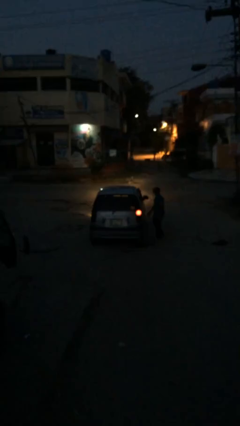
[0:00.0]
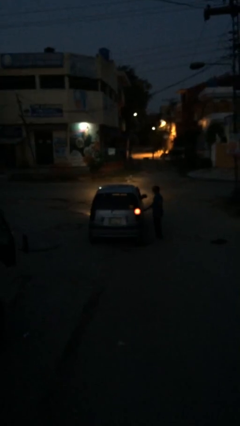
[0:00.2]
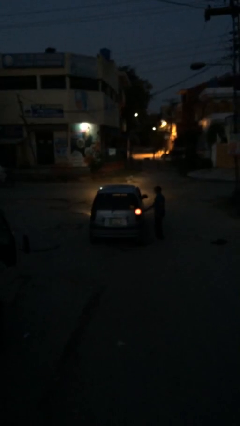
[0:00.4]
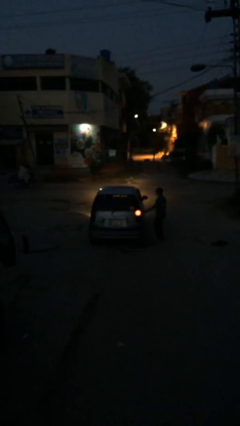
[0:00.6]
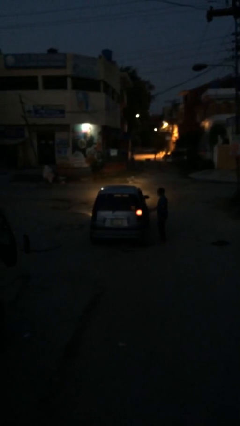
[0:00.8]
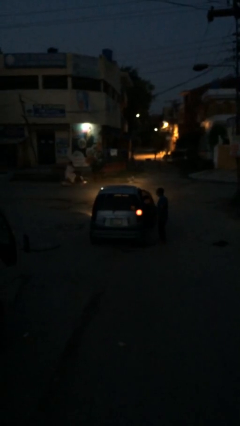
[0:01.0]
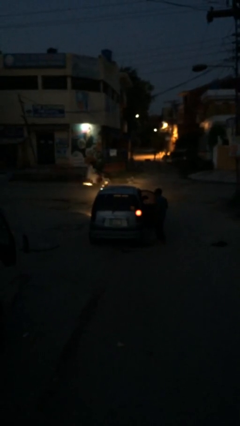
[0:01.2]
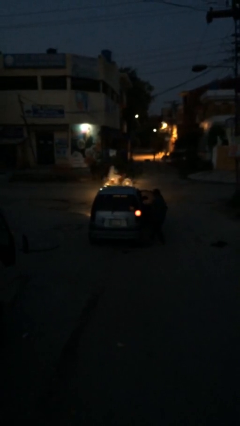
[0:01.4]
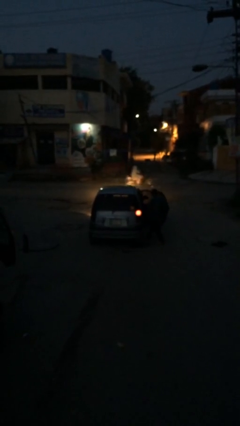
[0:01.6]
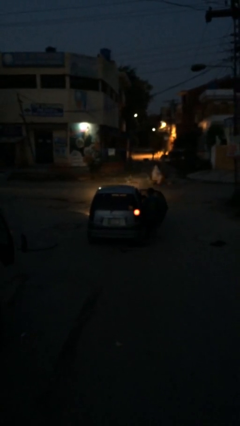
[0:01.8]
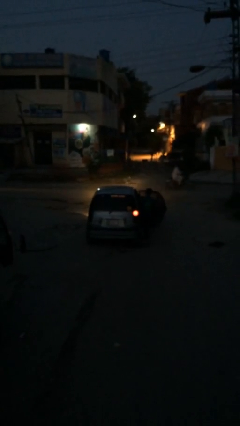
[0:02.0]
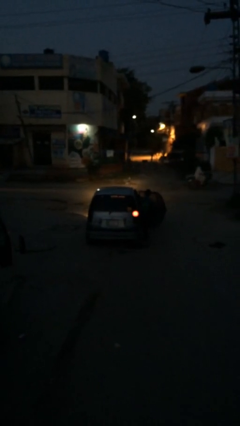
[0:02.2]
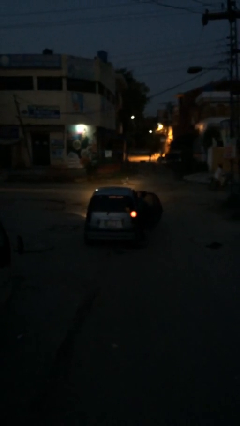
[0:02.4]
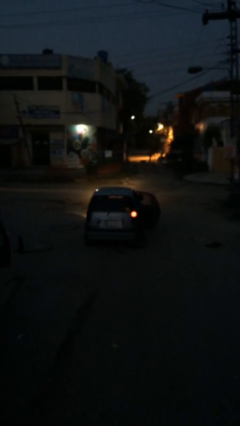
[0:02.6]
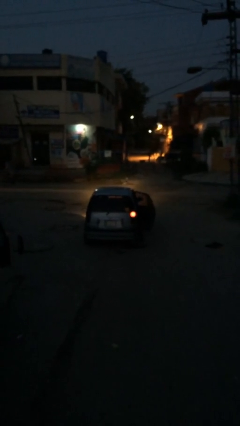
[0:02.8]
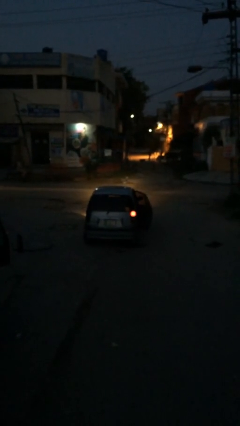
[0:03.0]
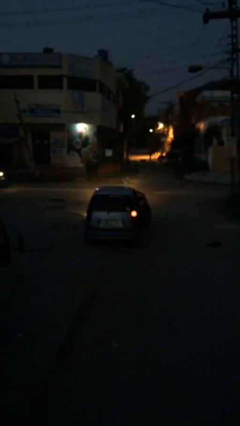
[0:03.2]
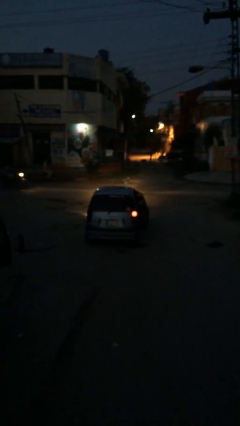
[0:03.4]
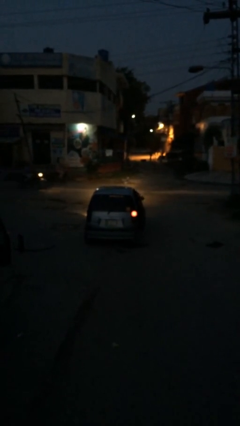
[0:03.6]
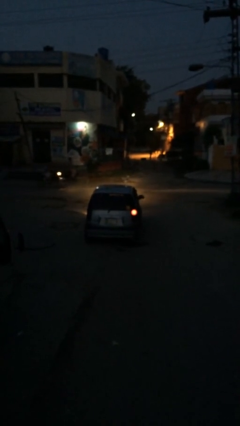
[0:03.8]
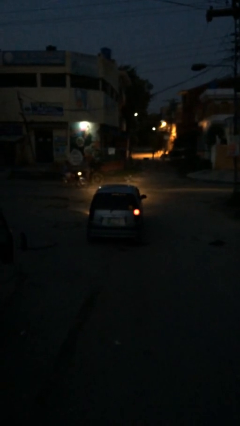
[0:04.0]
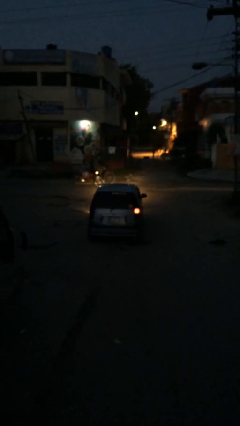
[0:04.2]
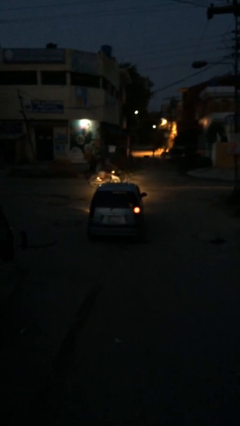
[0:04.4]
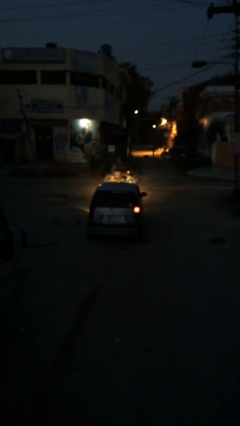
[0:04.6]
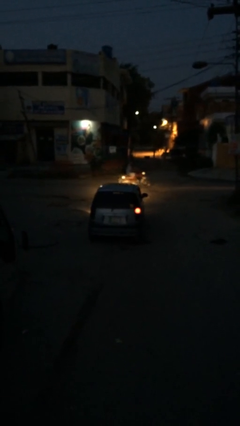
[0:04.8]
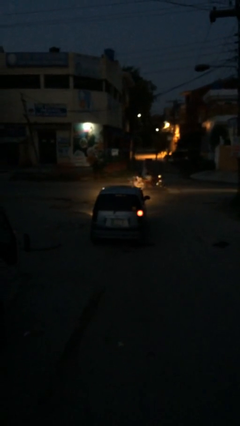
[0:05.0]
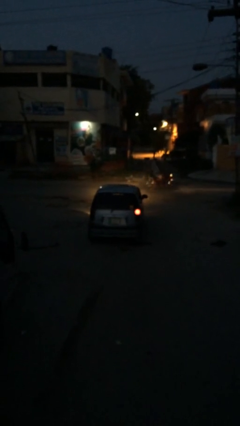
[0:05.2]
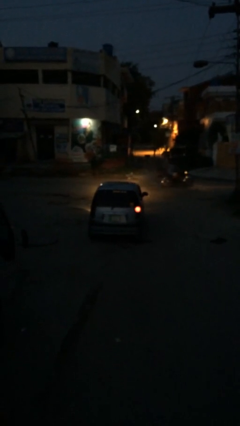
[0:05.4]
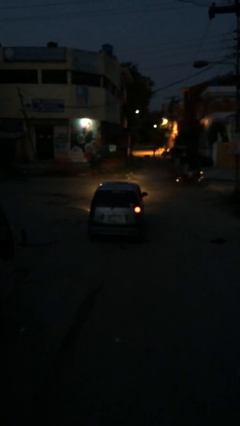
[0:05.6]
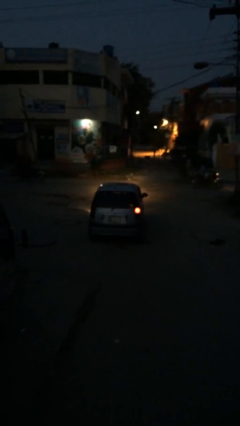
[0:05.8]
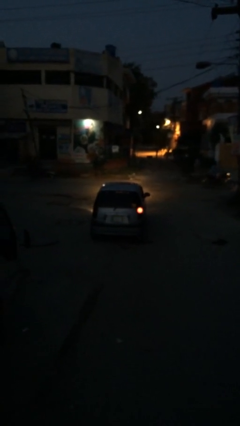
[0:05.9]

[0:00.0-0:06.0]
car picks up person

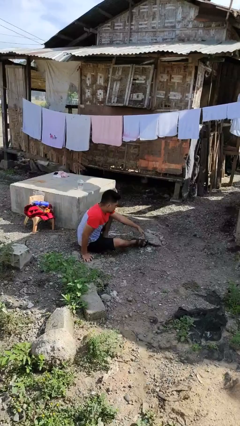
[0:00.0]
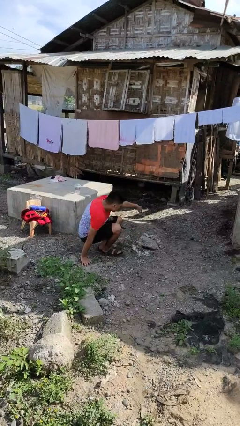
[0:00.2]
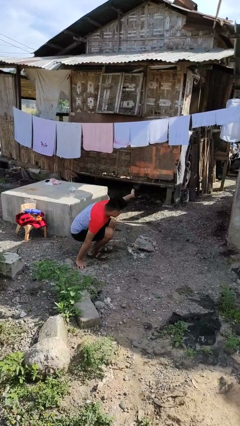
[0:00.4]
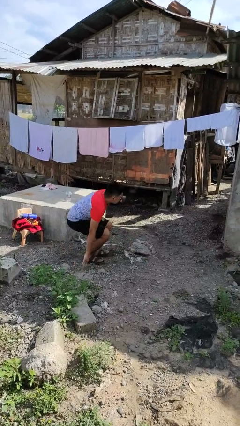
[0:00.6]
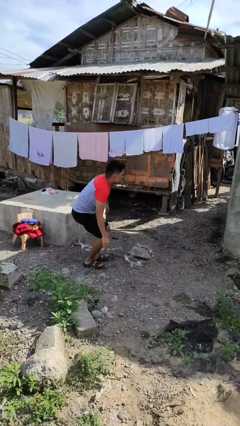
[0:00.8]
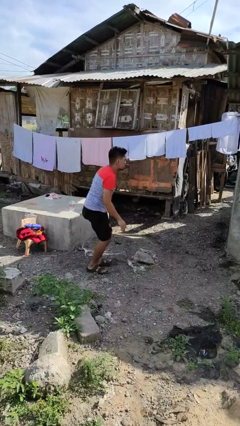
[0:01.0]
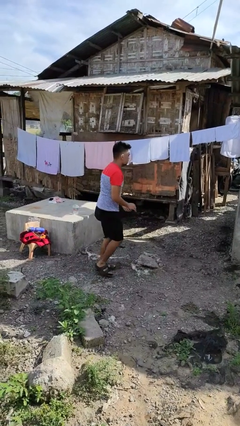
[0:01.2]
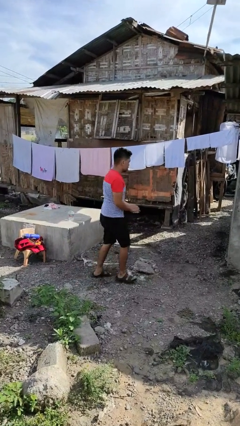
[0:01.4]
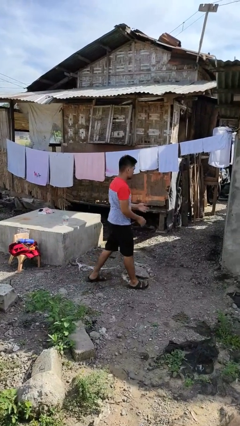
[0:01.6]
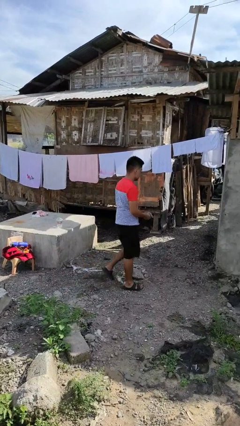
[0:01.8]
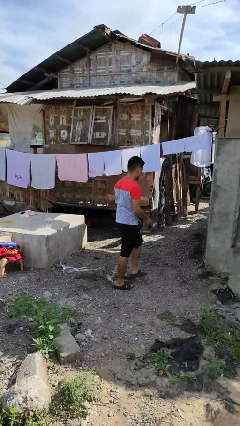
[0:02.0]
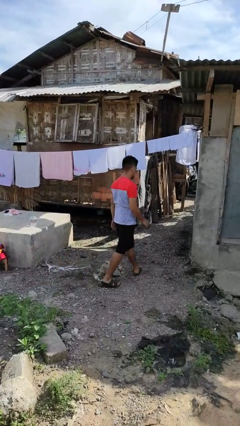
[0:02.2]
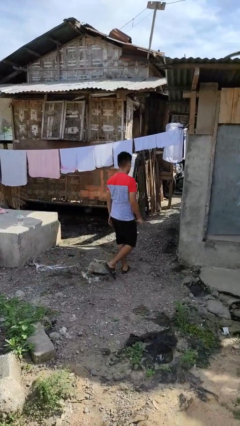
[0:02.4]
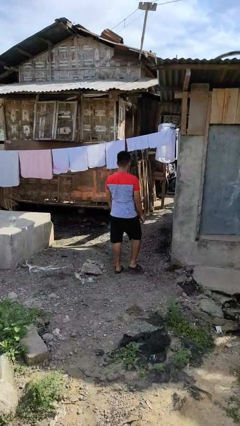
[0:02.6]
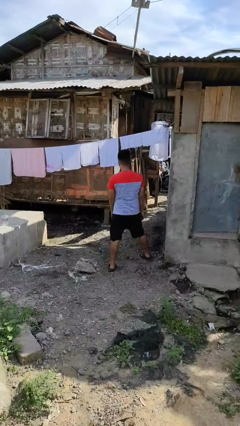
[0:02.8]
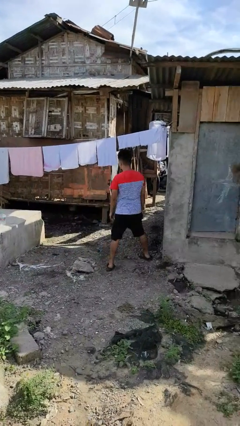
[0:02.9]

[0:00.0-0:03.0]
person stands up from floor

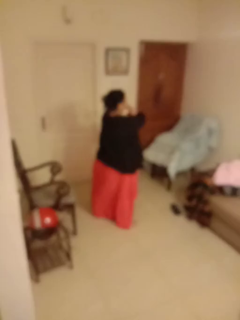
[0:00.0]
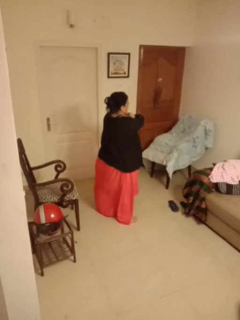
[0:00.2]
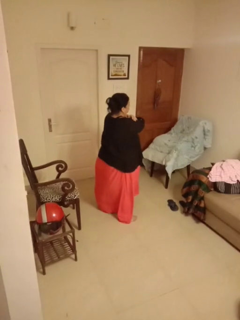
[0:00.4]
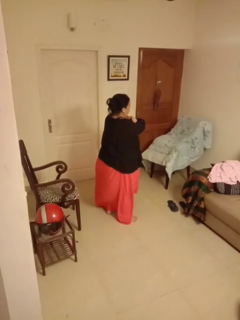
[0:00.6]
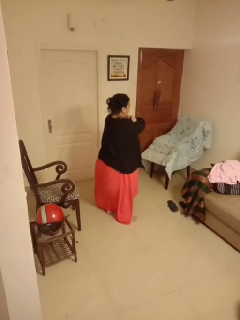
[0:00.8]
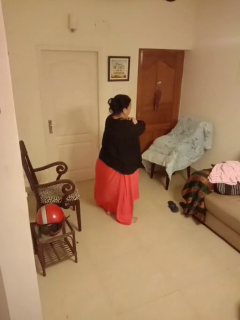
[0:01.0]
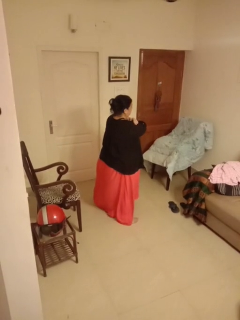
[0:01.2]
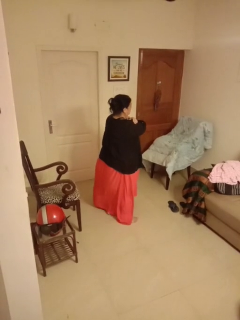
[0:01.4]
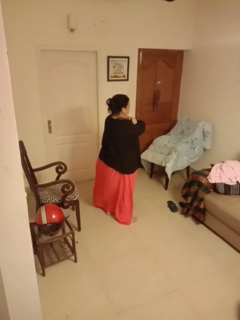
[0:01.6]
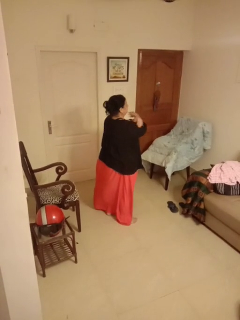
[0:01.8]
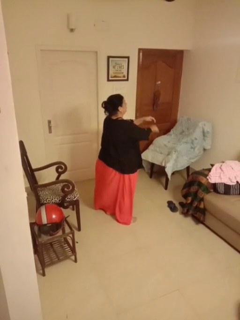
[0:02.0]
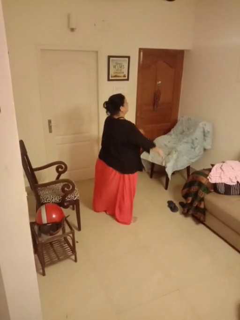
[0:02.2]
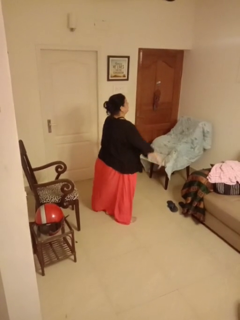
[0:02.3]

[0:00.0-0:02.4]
person gestures arms x

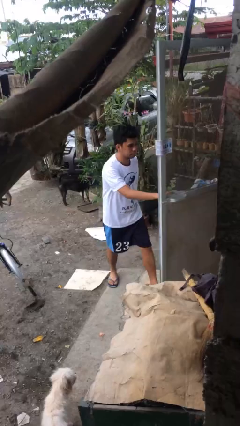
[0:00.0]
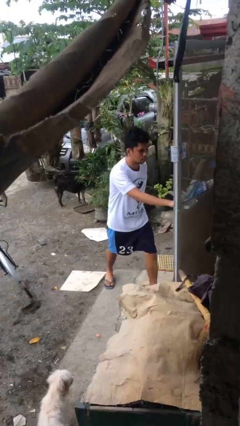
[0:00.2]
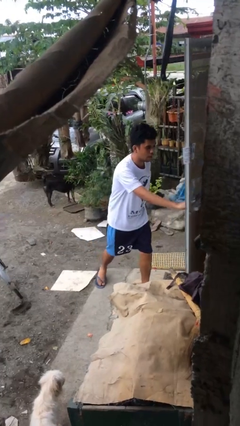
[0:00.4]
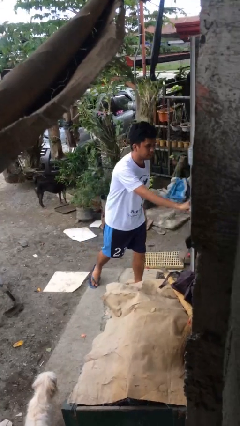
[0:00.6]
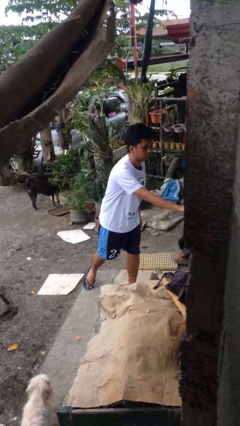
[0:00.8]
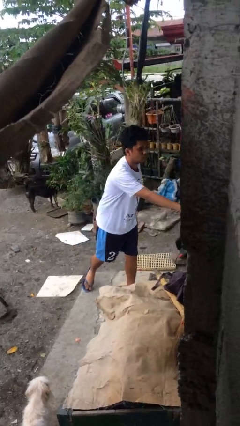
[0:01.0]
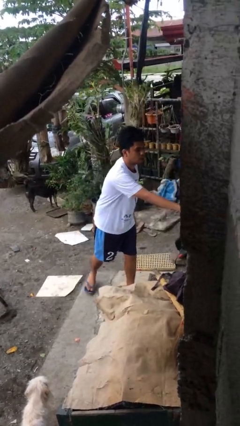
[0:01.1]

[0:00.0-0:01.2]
person closes facility door

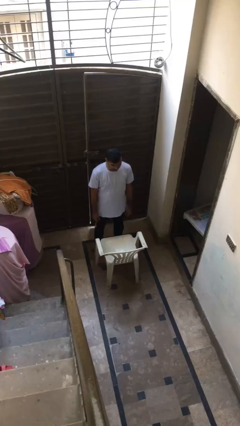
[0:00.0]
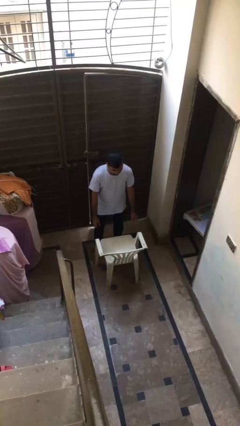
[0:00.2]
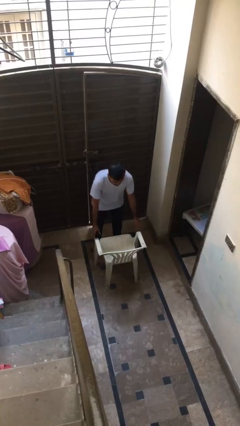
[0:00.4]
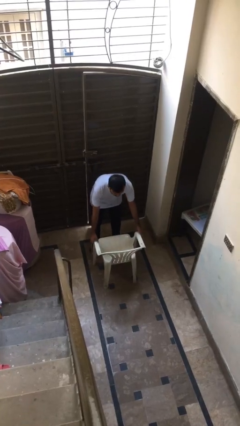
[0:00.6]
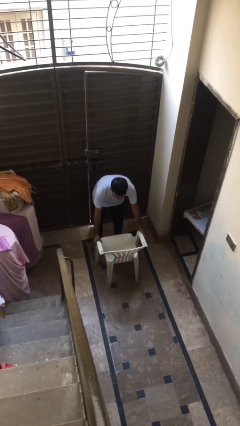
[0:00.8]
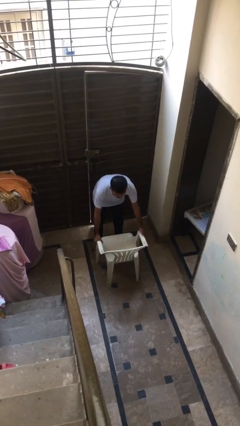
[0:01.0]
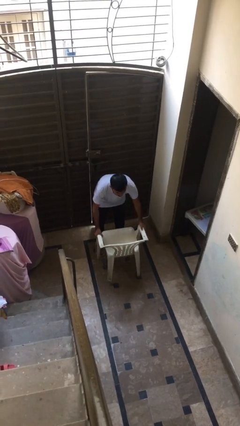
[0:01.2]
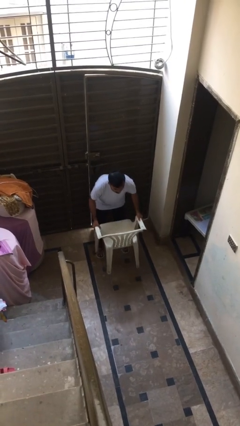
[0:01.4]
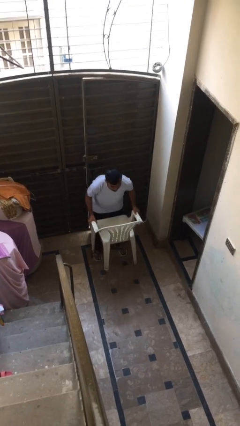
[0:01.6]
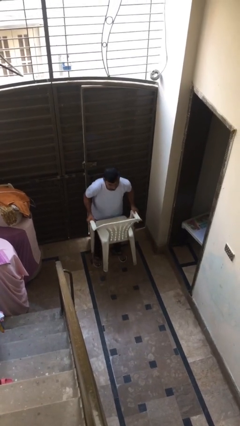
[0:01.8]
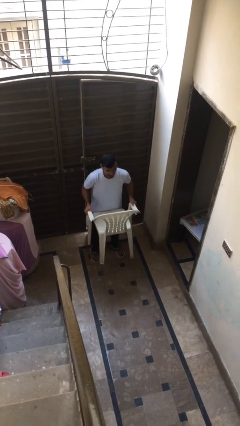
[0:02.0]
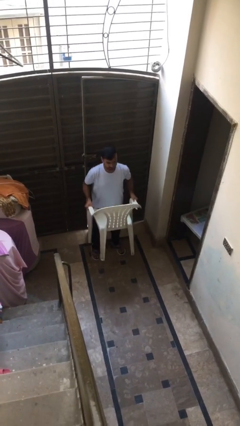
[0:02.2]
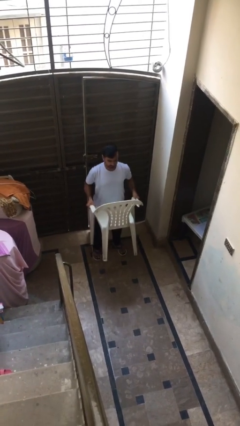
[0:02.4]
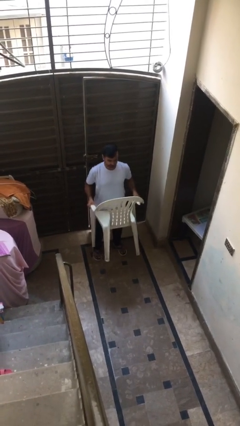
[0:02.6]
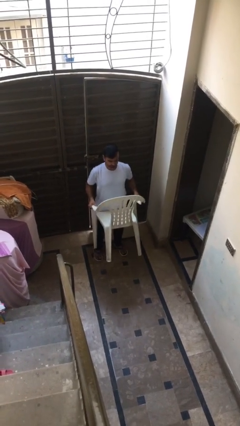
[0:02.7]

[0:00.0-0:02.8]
person picks up object from floor

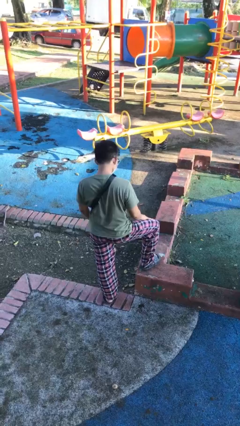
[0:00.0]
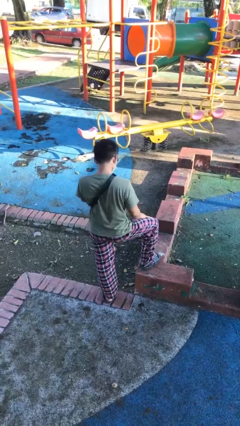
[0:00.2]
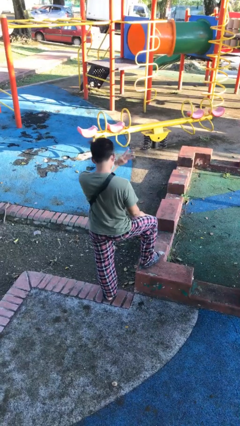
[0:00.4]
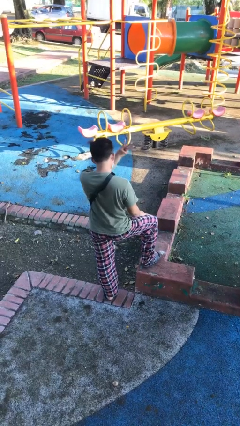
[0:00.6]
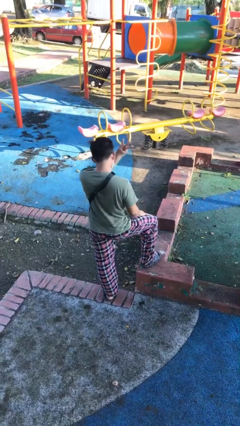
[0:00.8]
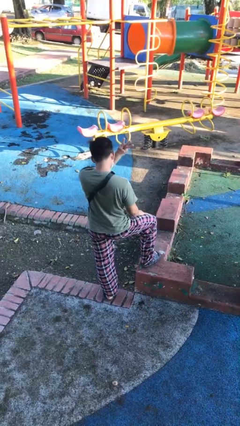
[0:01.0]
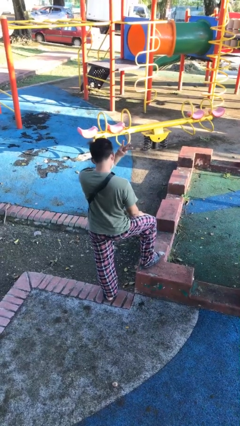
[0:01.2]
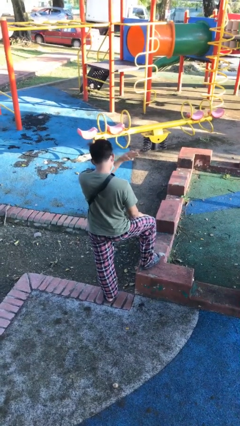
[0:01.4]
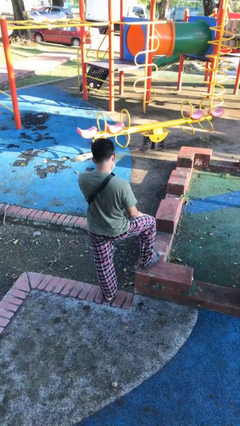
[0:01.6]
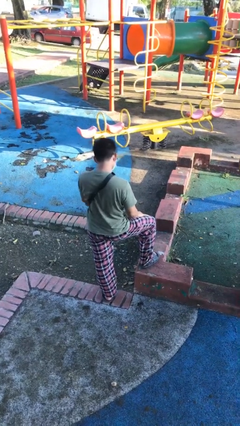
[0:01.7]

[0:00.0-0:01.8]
person gestures number three

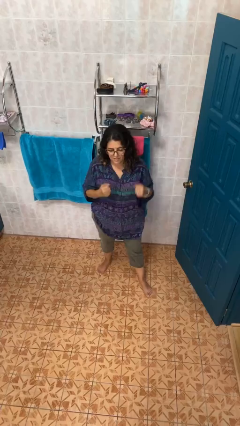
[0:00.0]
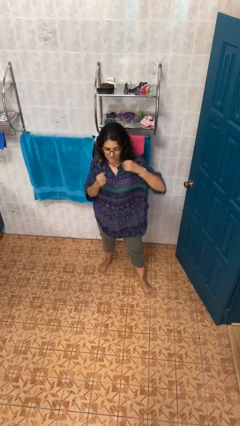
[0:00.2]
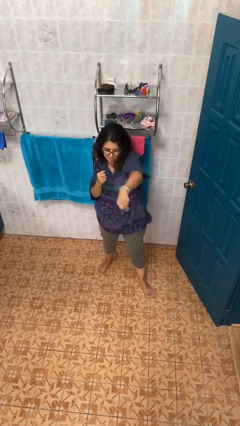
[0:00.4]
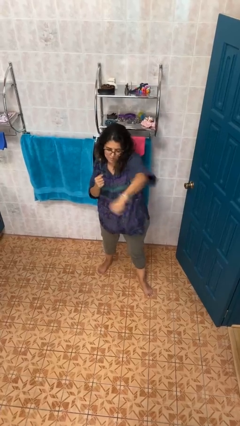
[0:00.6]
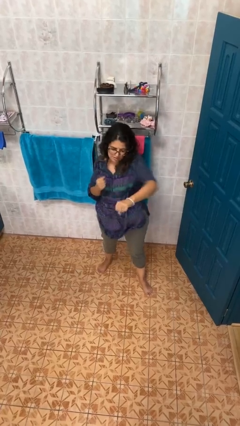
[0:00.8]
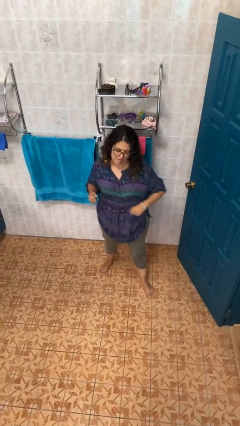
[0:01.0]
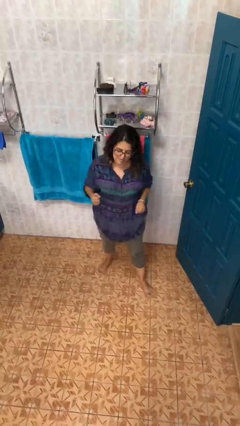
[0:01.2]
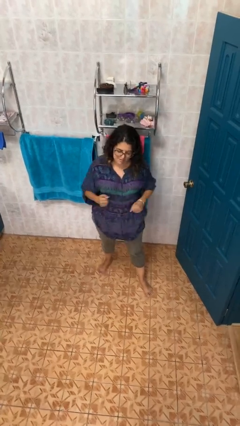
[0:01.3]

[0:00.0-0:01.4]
person punches
